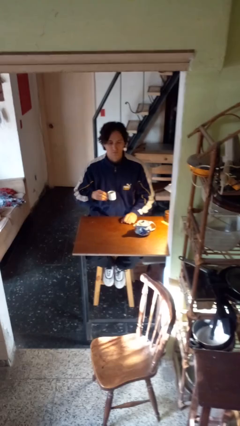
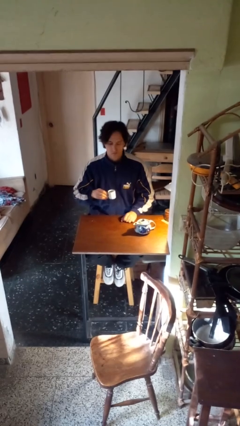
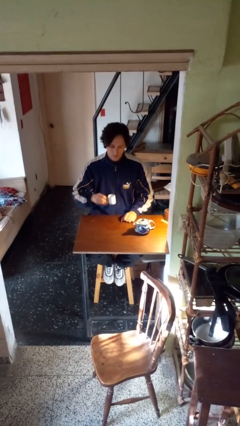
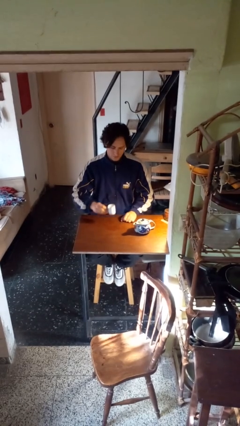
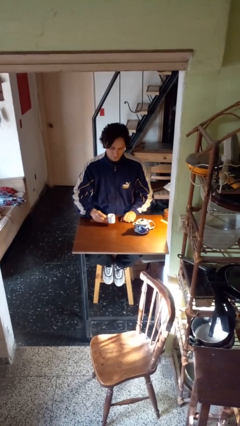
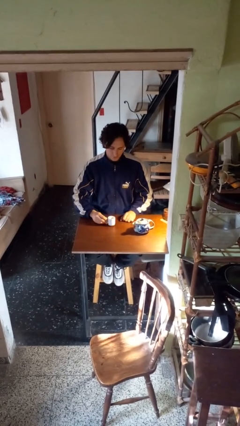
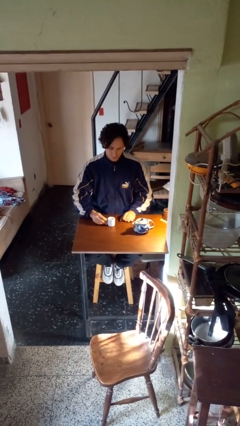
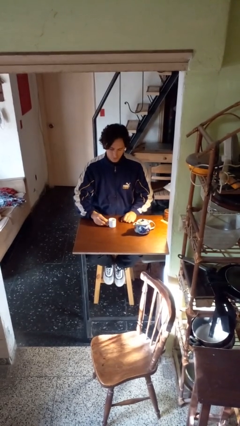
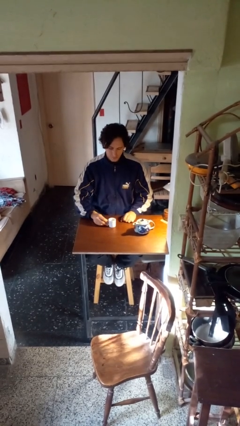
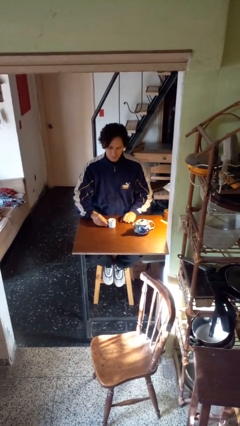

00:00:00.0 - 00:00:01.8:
person puts down object on table

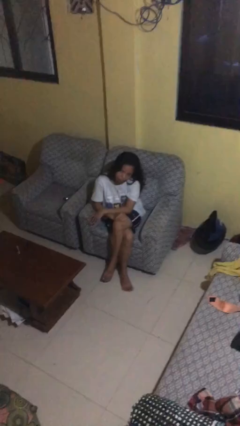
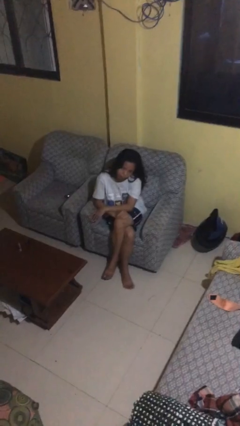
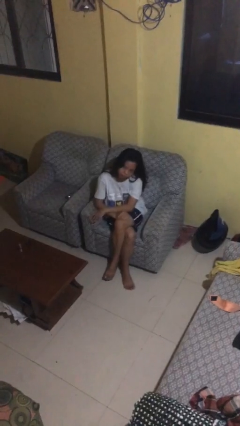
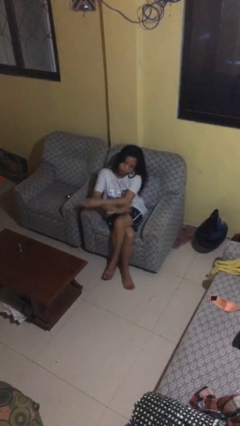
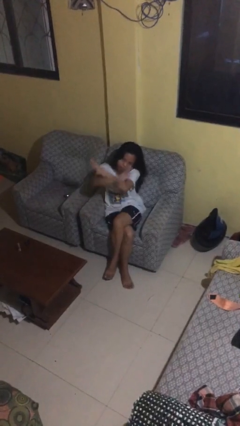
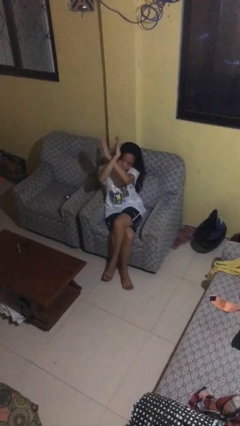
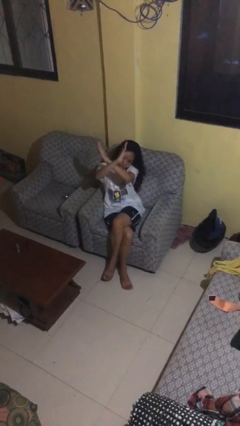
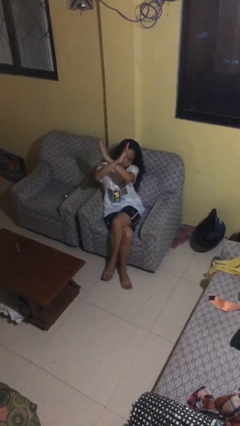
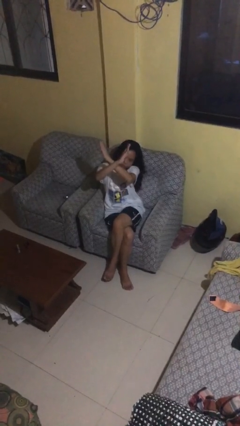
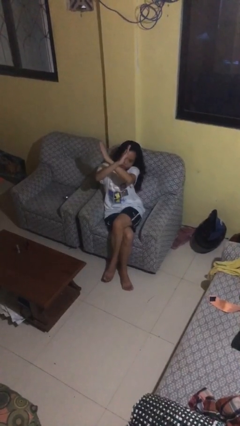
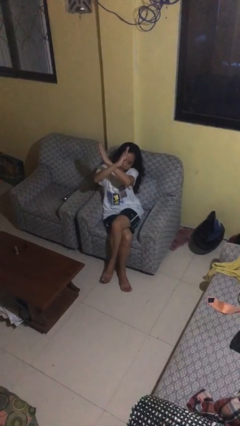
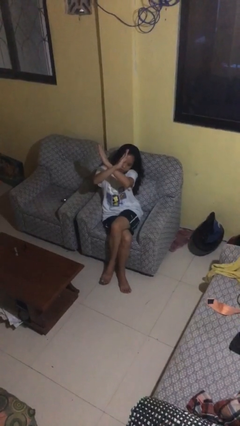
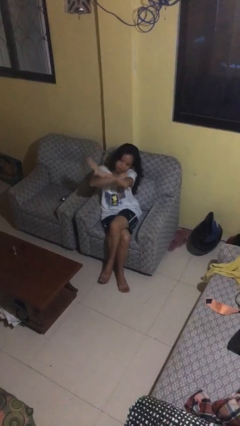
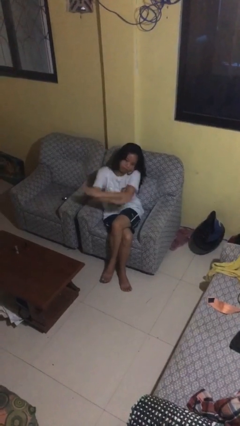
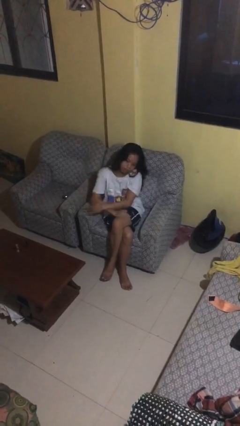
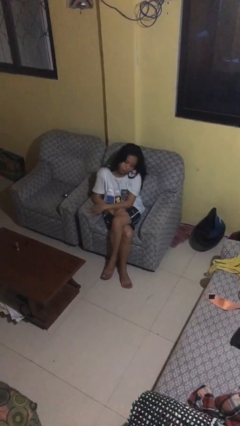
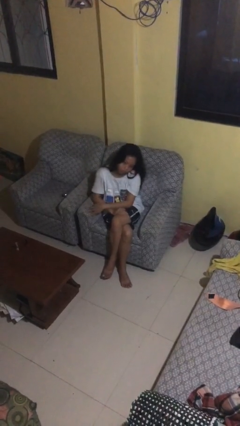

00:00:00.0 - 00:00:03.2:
person gestures arms x

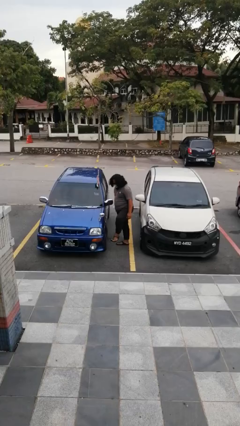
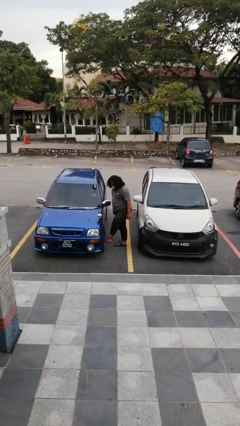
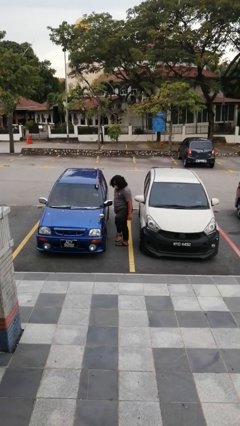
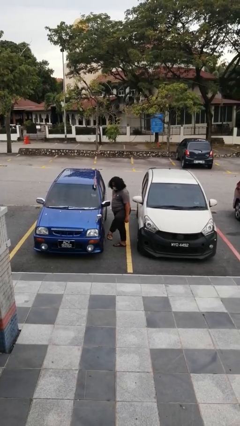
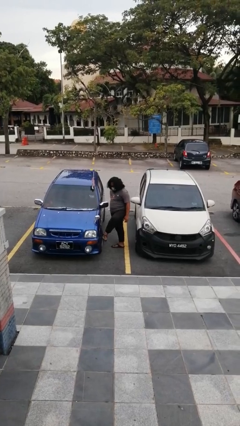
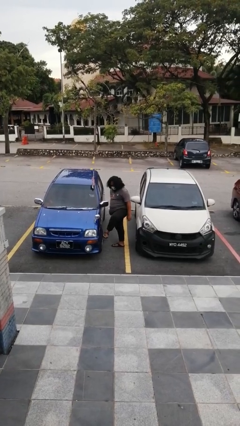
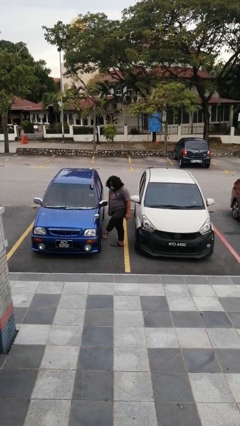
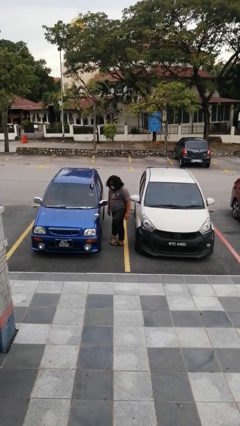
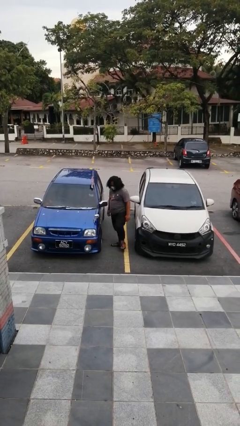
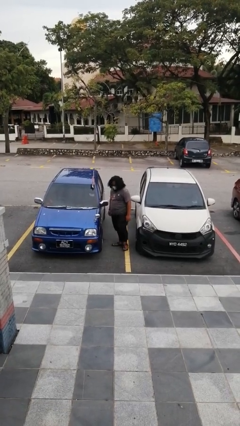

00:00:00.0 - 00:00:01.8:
person kicks car tires

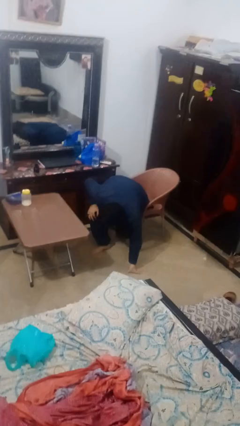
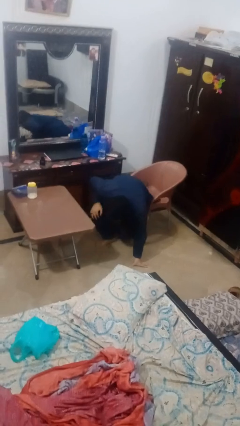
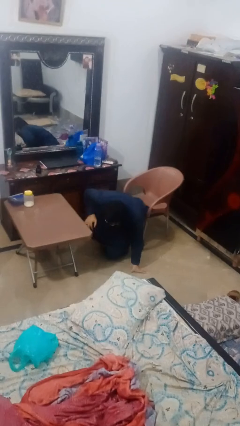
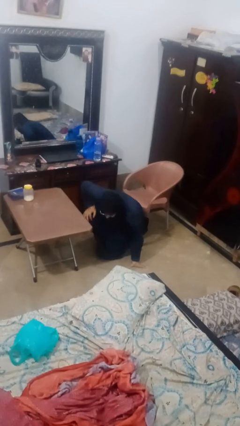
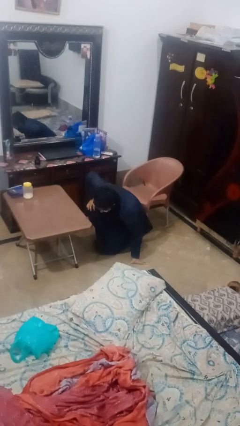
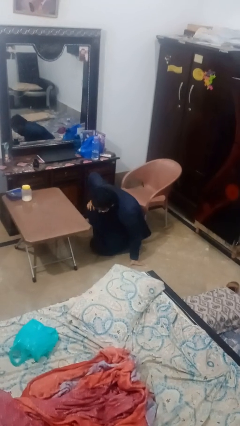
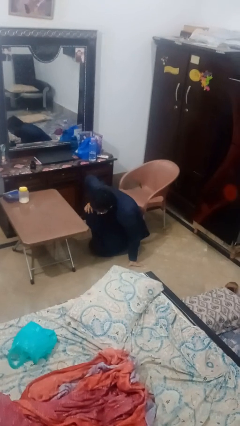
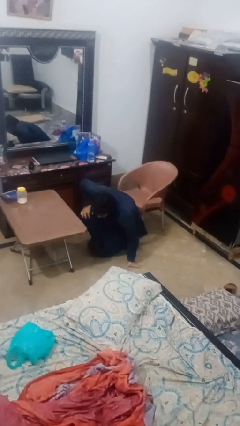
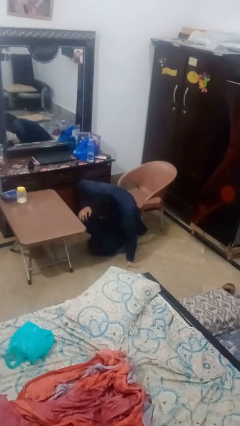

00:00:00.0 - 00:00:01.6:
person falls from chair

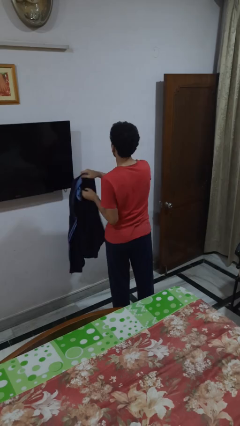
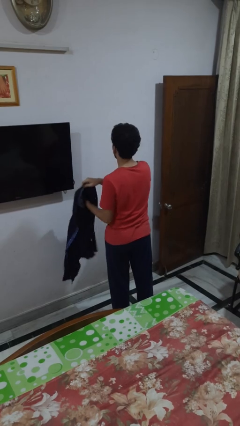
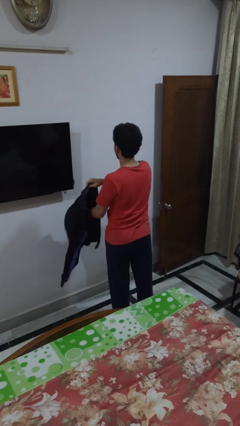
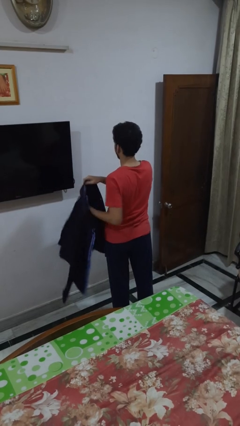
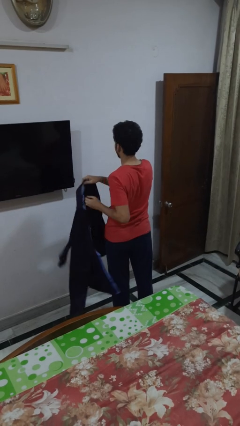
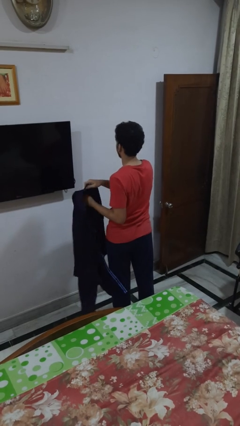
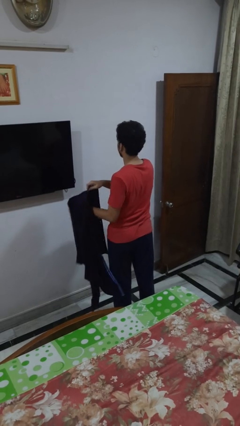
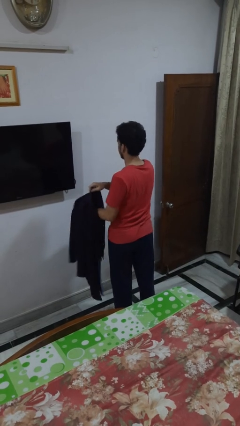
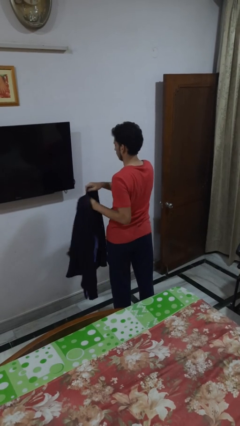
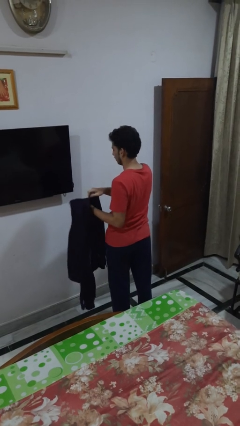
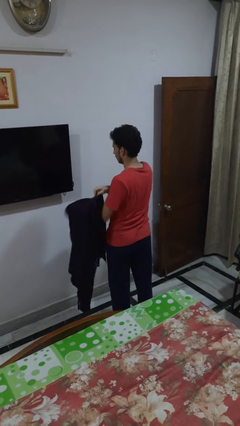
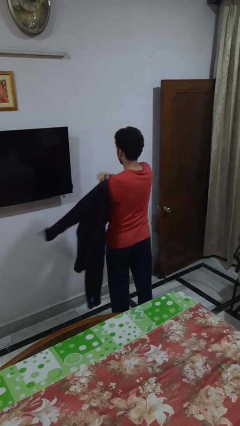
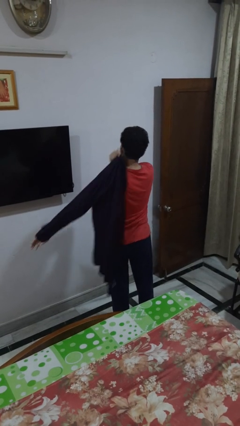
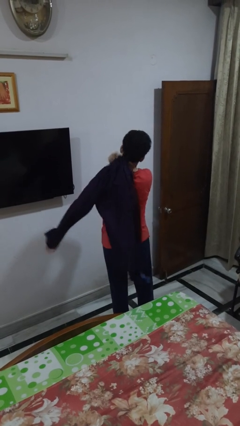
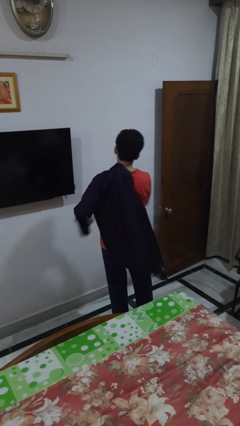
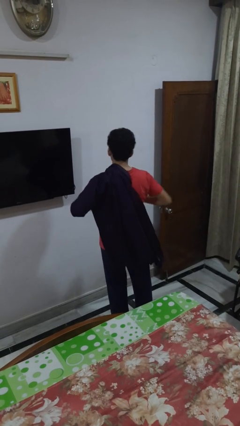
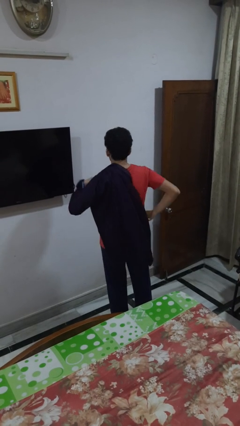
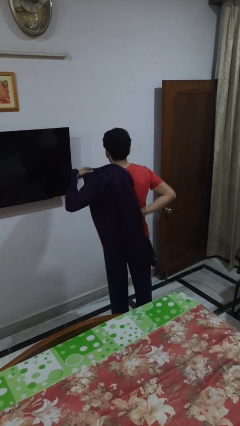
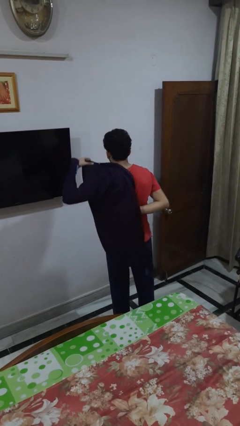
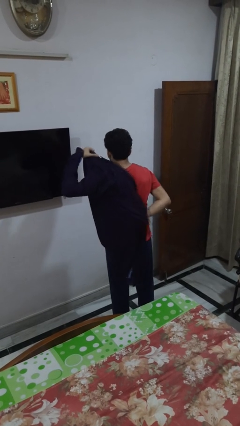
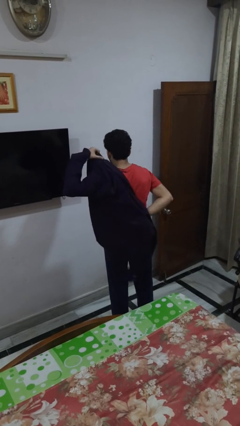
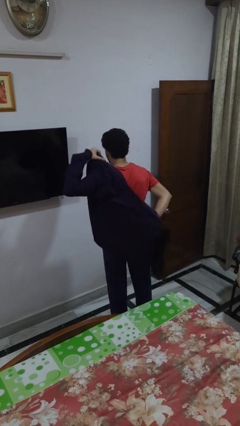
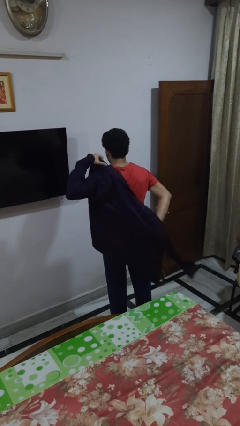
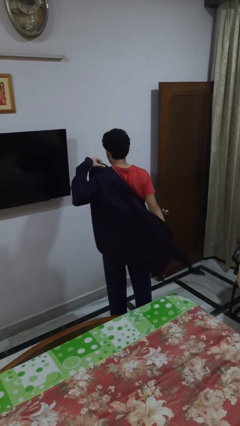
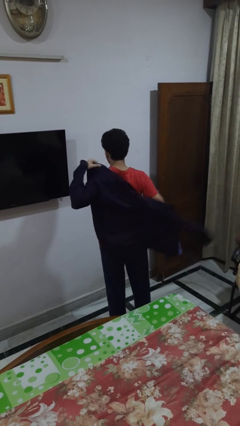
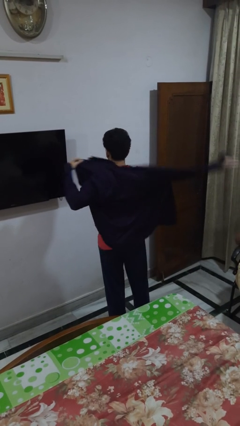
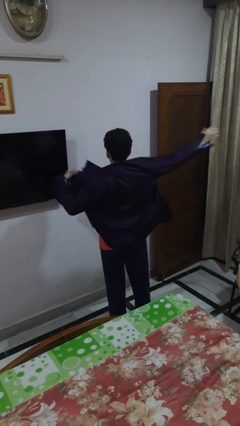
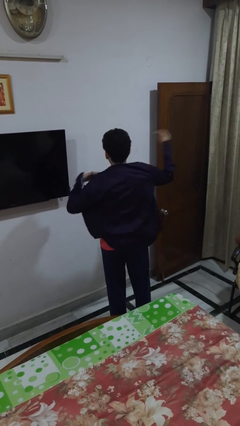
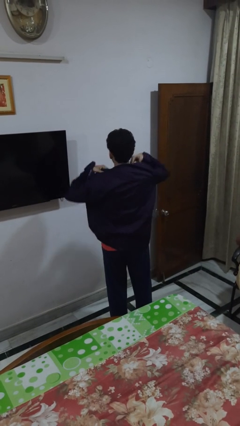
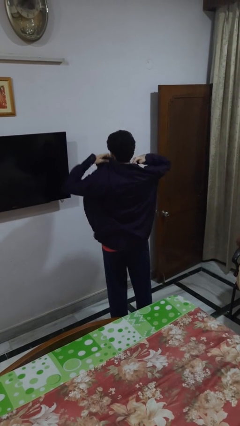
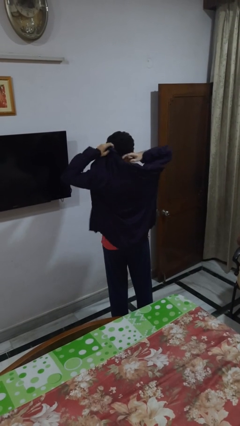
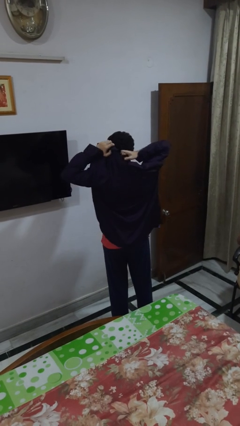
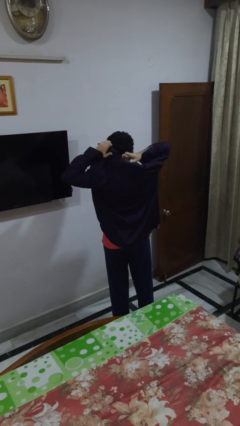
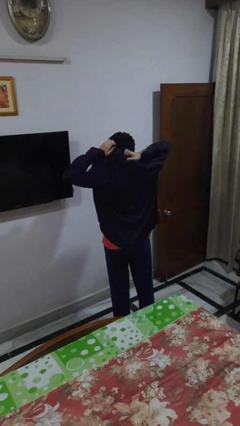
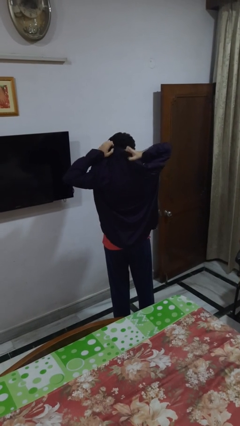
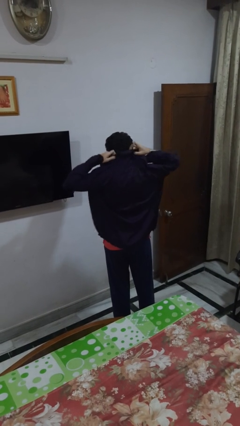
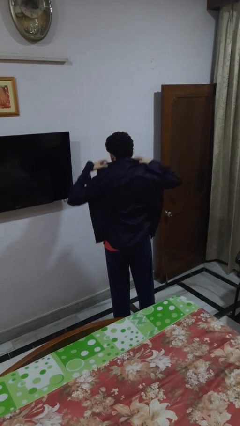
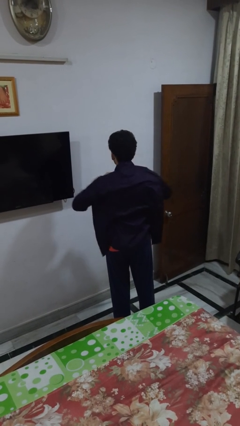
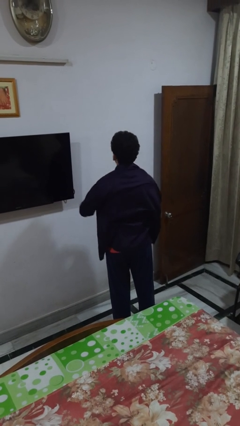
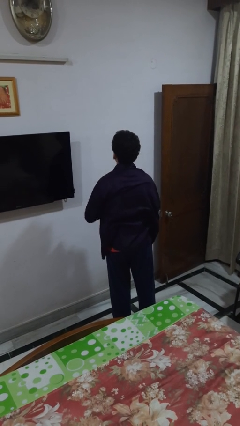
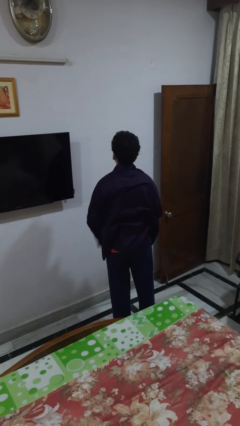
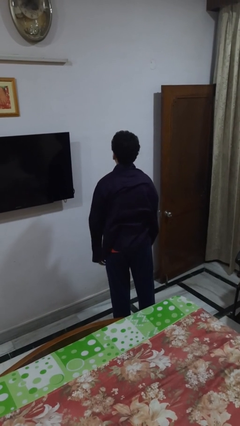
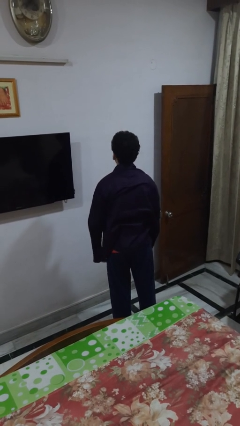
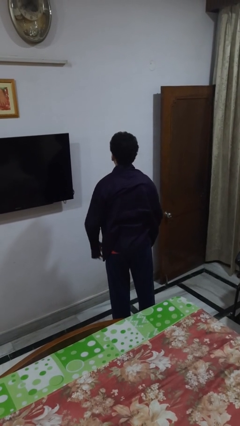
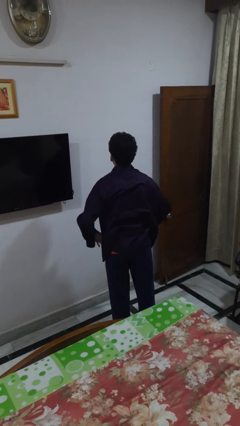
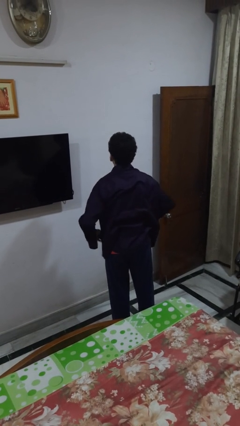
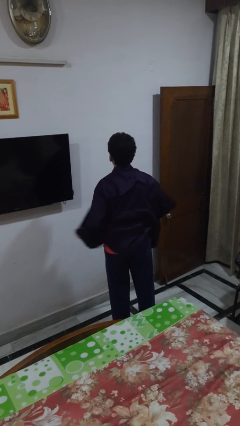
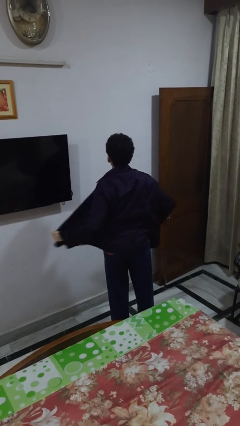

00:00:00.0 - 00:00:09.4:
person puts on shirt
